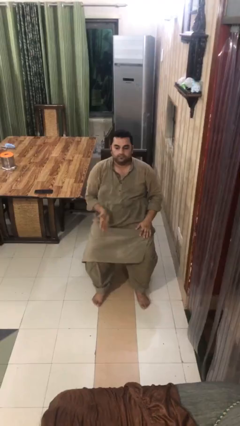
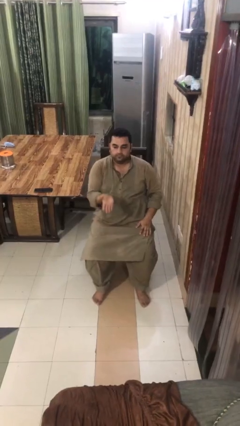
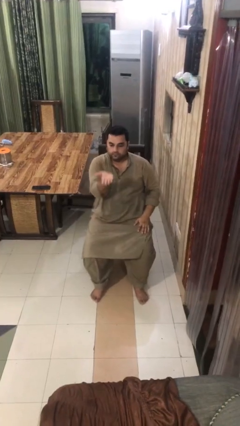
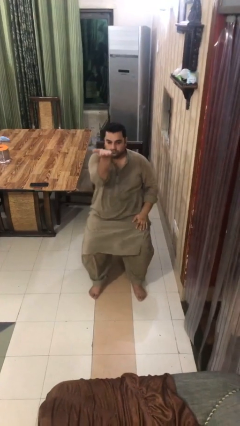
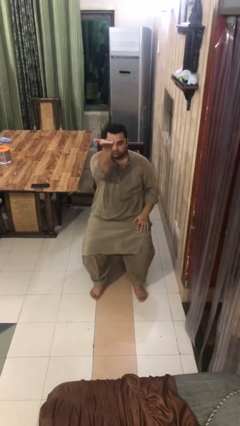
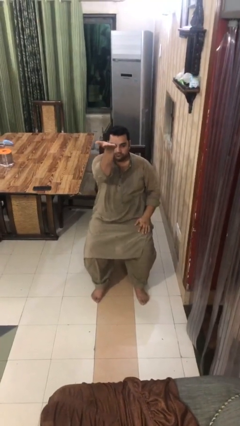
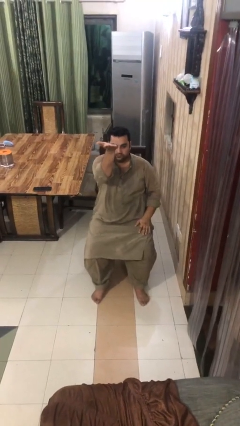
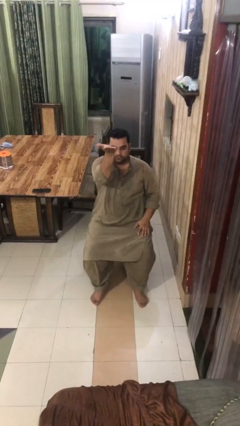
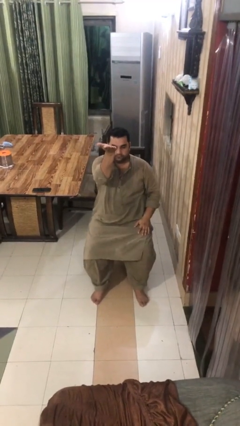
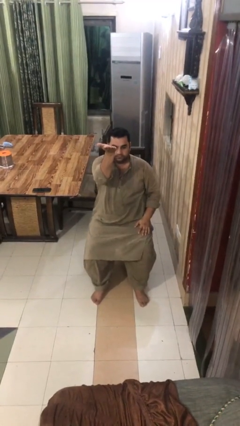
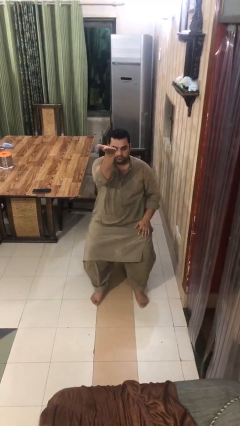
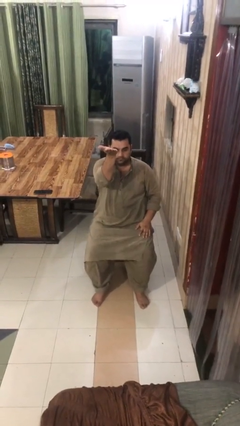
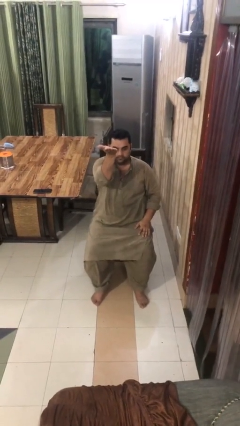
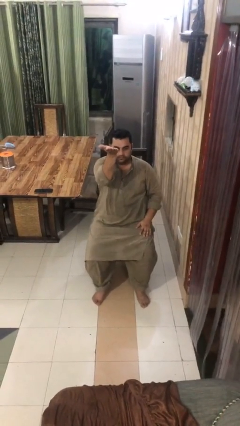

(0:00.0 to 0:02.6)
person gestures swipe up

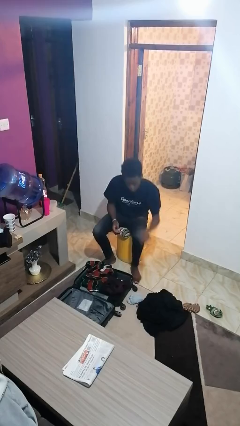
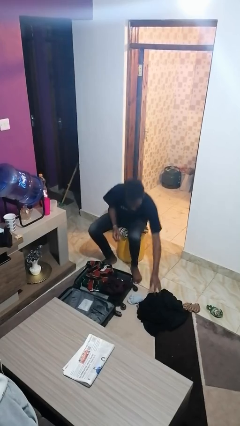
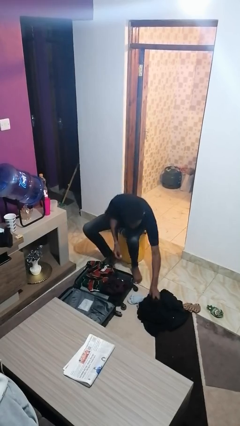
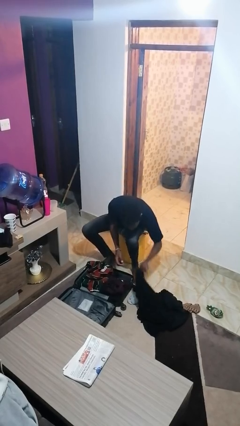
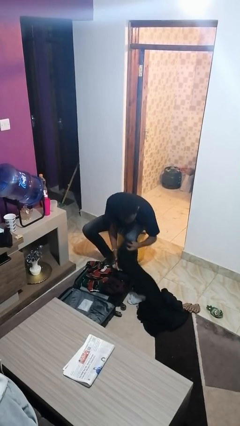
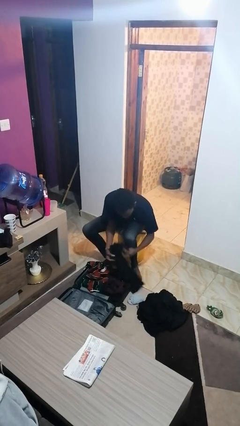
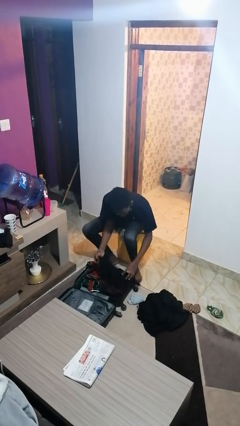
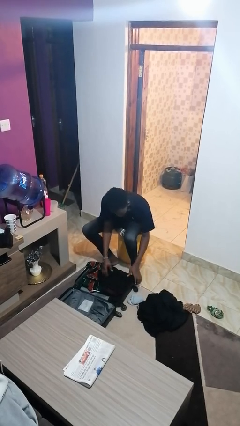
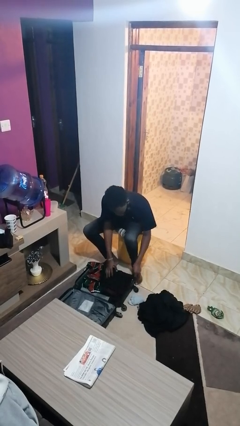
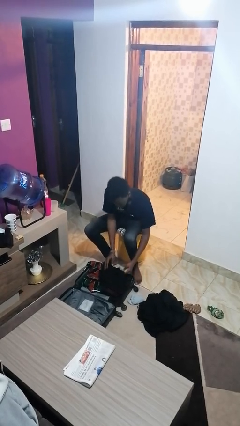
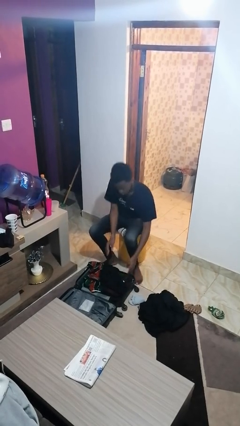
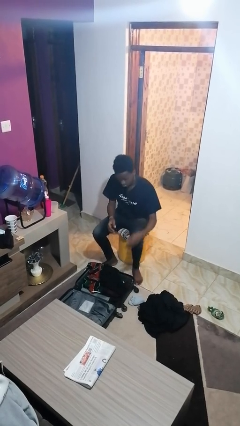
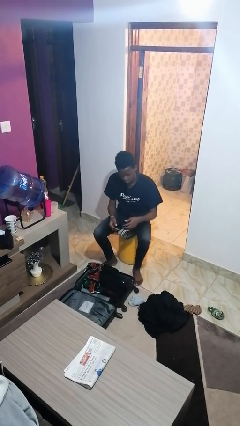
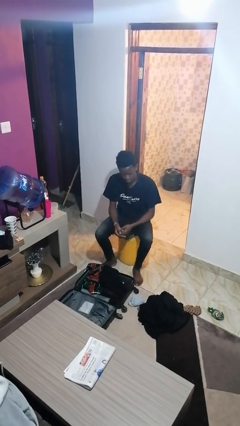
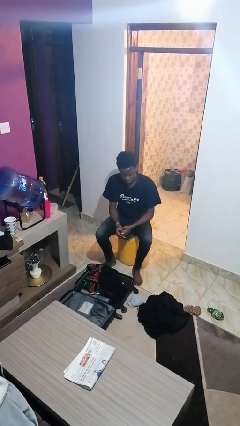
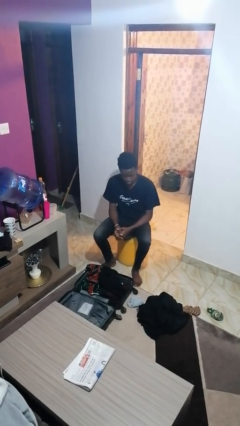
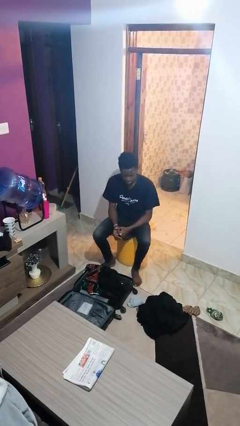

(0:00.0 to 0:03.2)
person loads clothes into suitcase

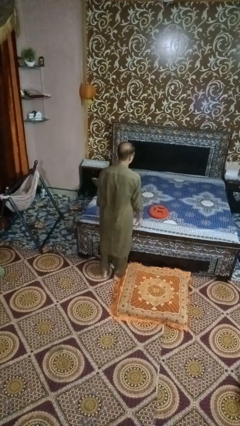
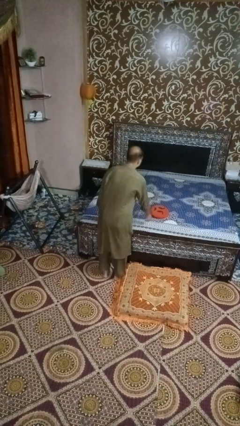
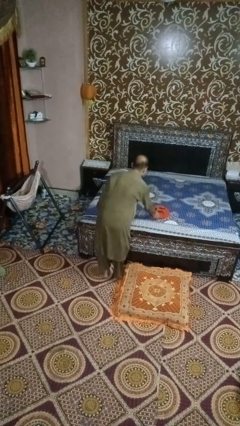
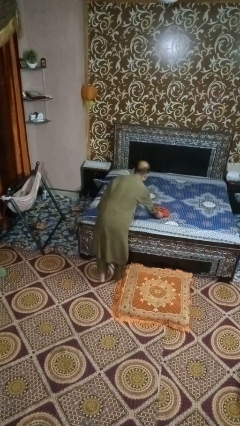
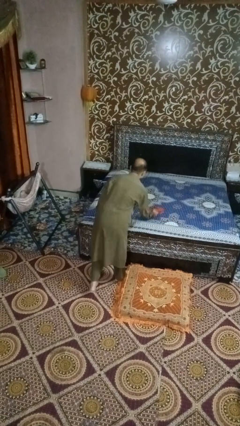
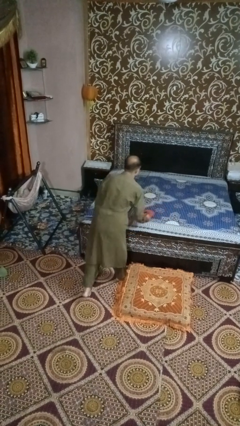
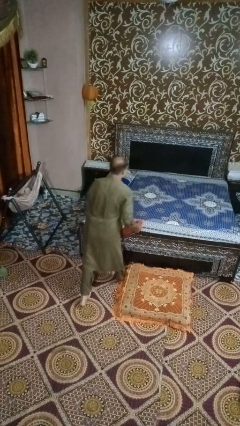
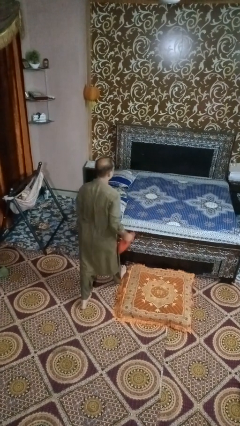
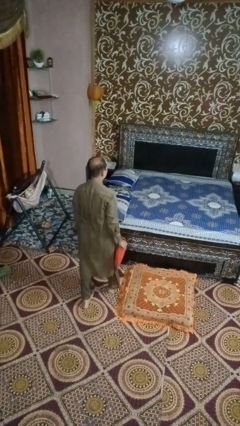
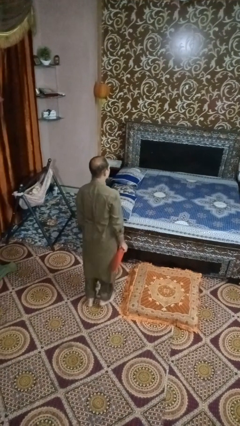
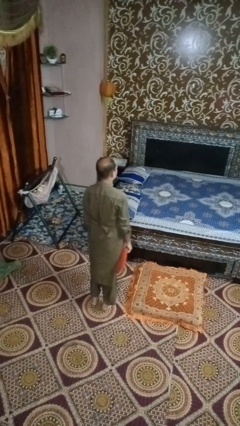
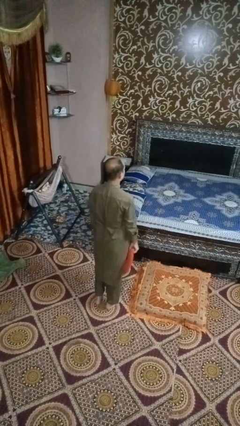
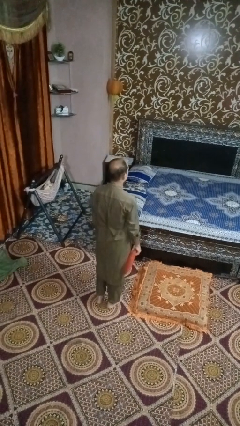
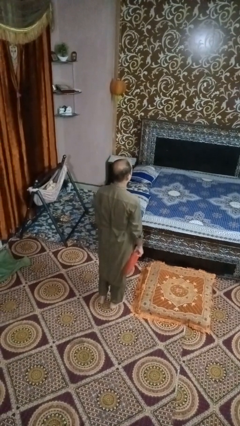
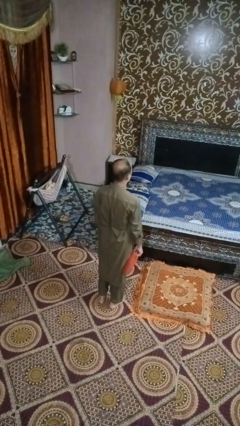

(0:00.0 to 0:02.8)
person picks up object from bed

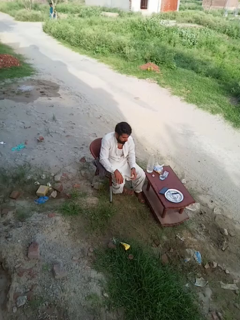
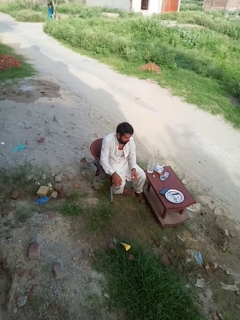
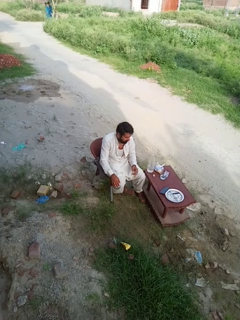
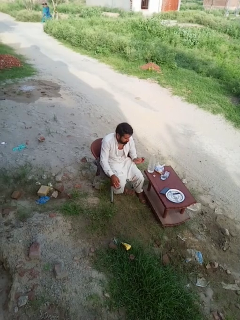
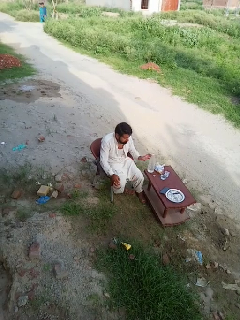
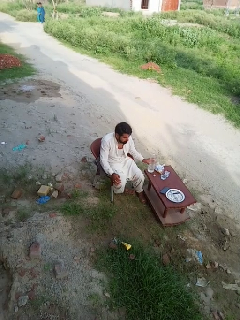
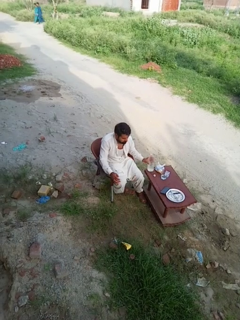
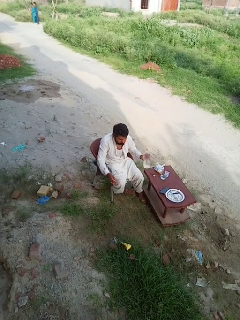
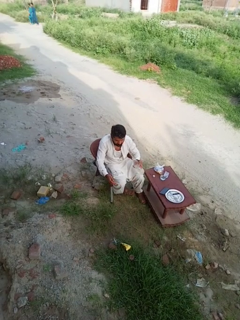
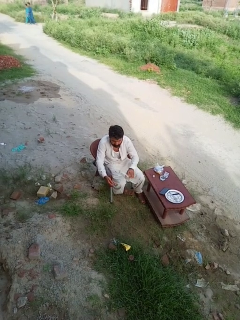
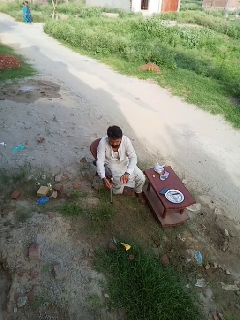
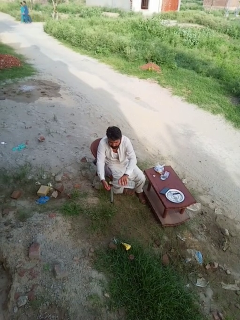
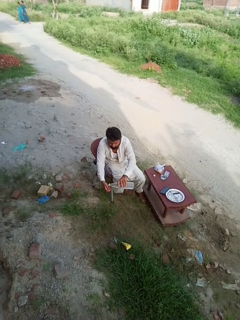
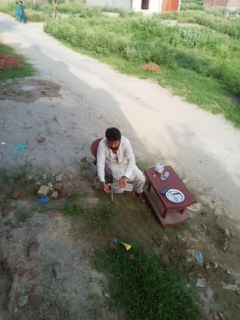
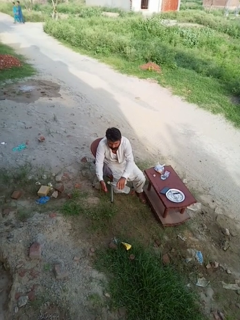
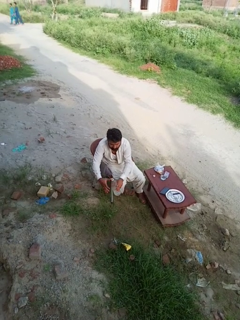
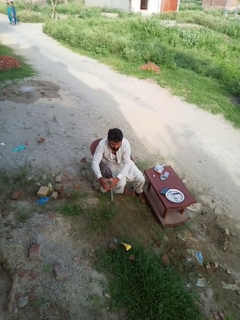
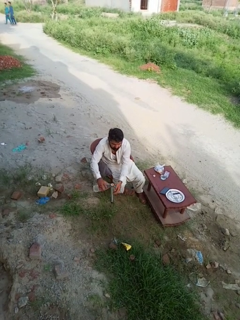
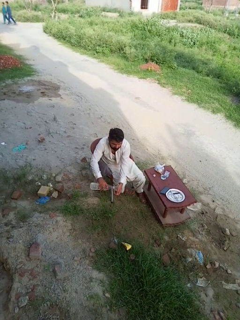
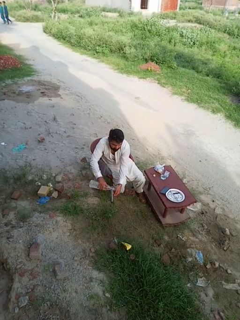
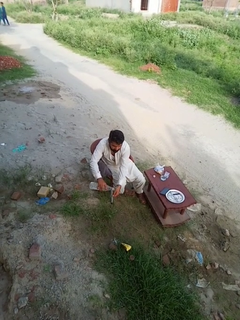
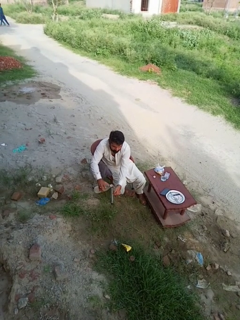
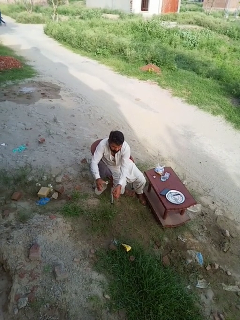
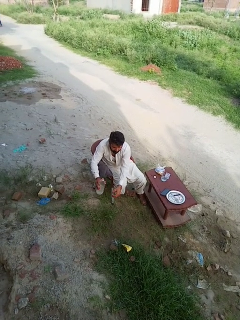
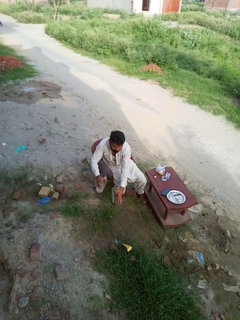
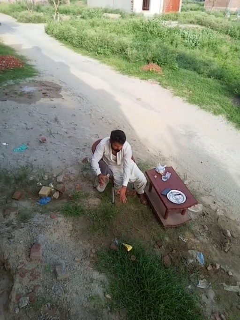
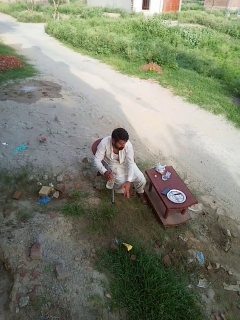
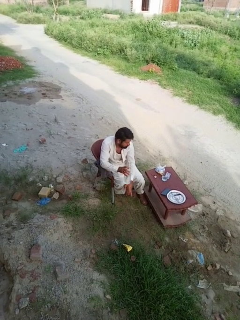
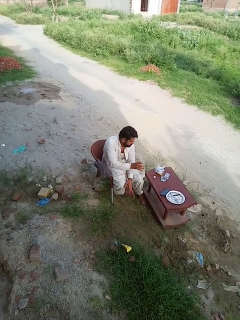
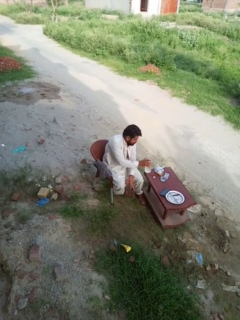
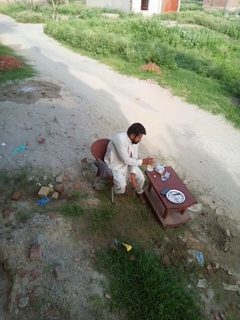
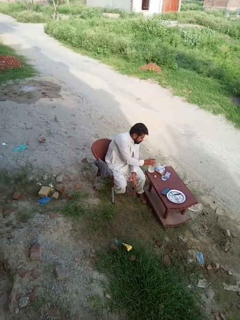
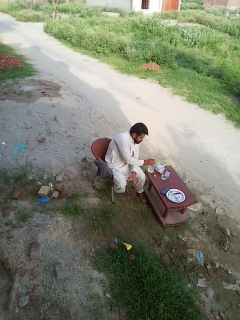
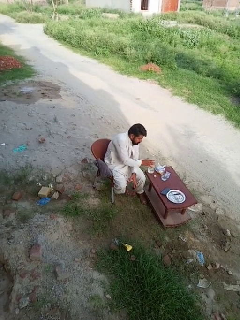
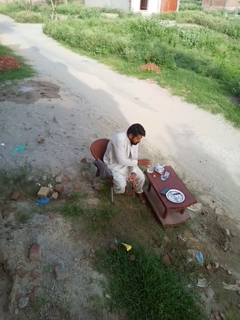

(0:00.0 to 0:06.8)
person washes hands

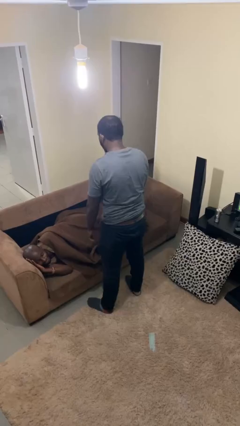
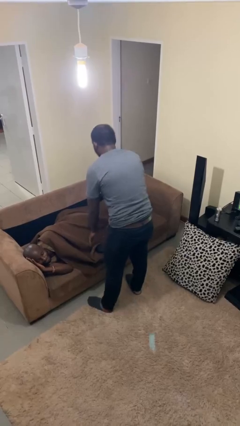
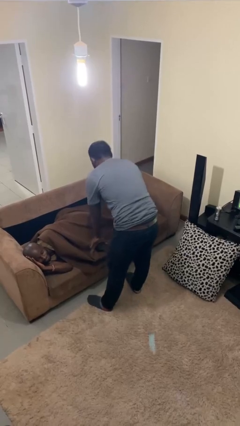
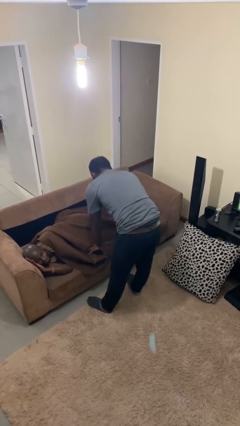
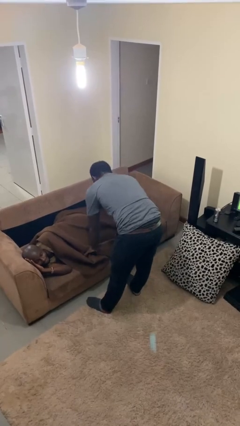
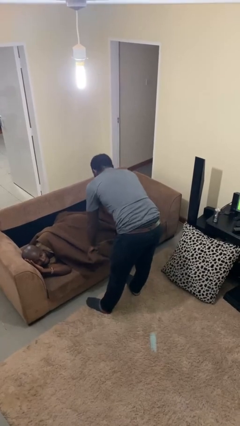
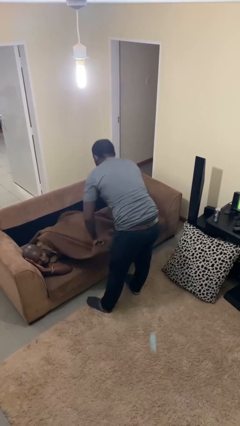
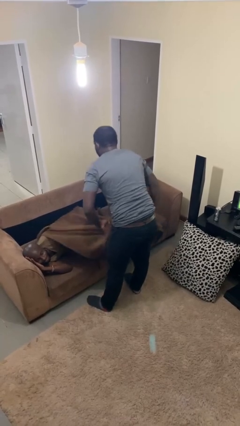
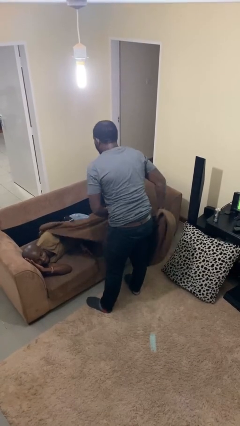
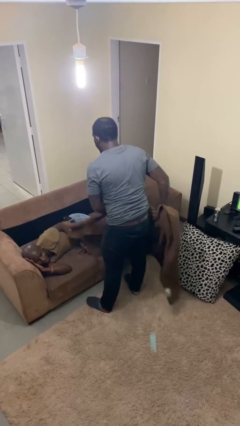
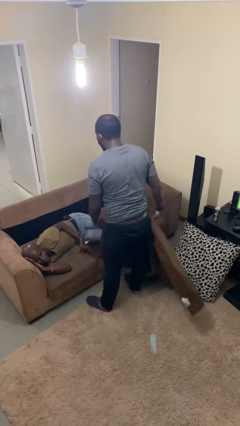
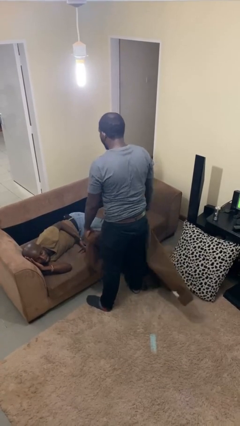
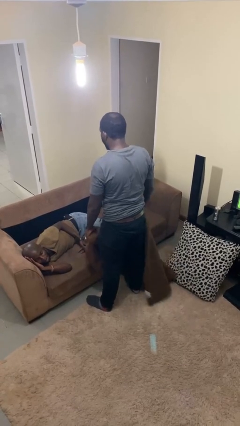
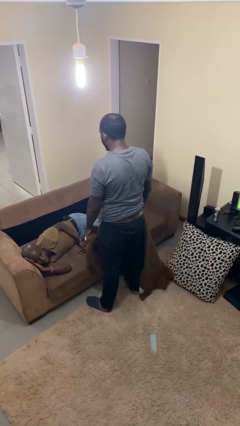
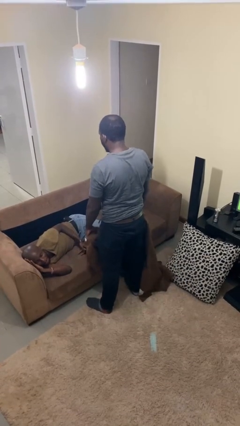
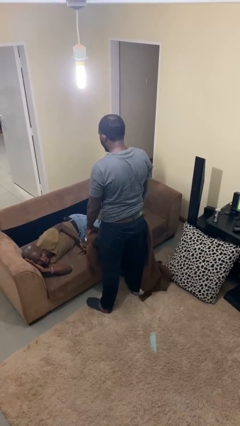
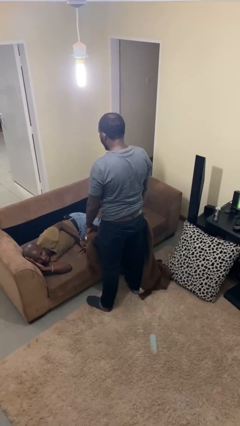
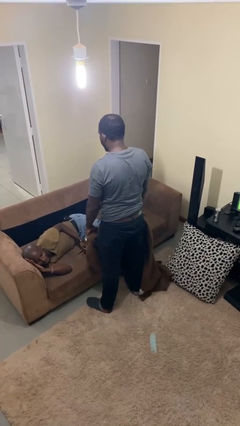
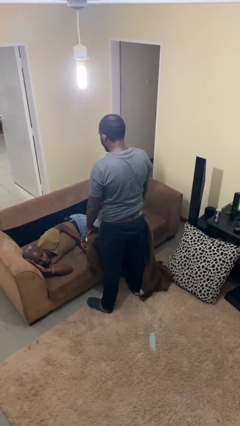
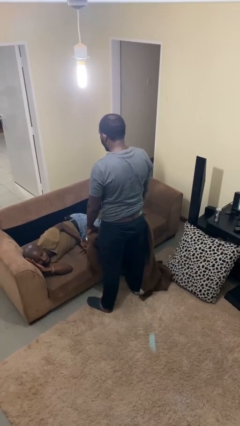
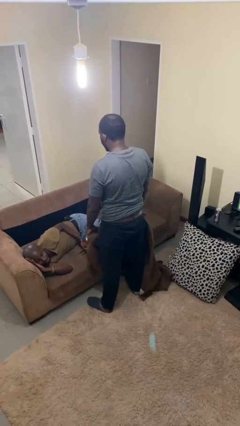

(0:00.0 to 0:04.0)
person uncovers friend with blanket
